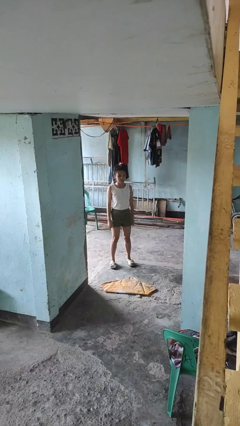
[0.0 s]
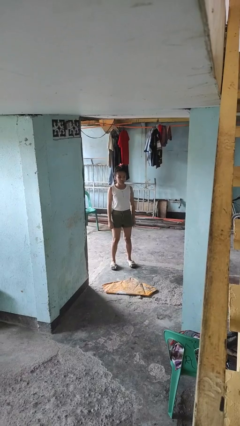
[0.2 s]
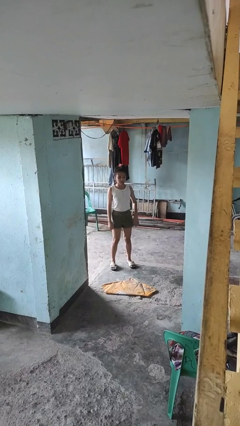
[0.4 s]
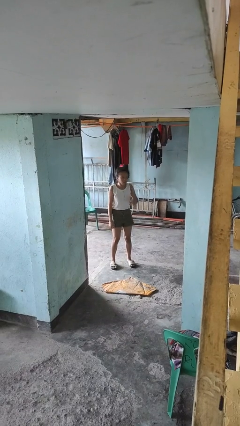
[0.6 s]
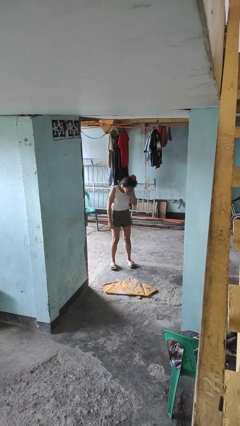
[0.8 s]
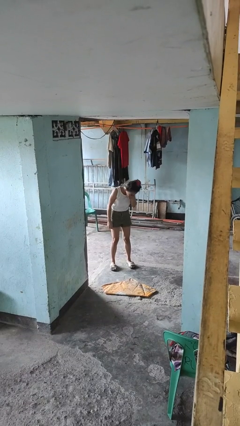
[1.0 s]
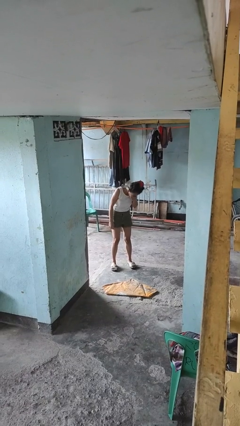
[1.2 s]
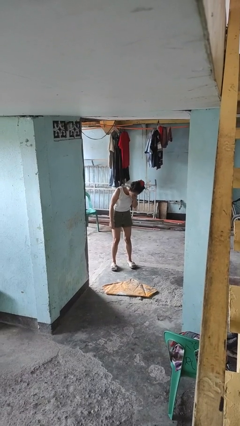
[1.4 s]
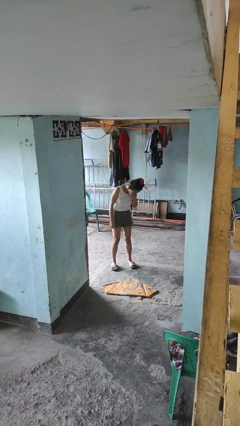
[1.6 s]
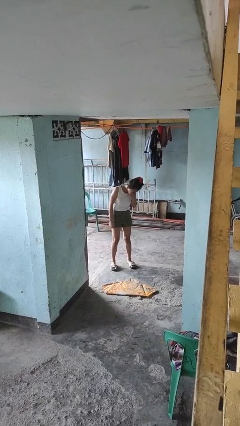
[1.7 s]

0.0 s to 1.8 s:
person sneezes into hand

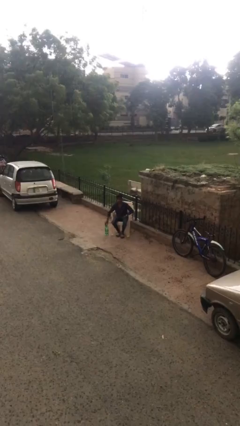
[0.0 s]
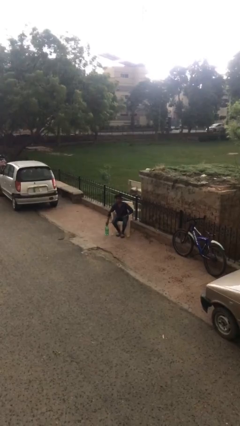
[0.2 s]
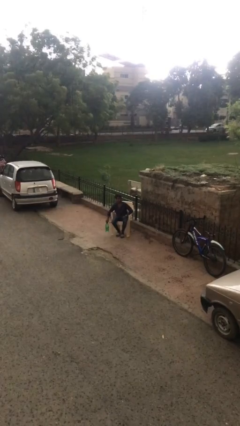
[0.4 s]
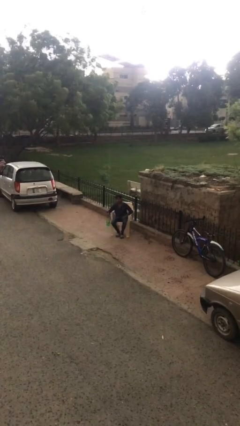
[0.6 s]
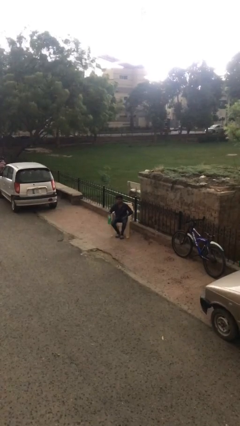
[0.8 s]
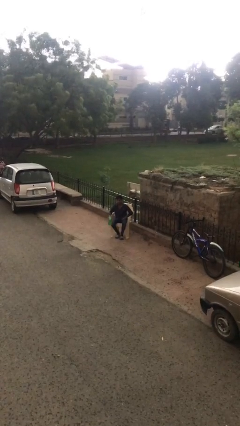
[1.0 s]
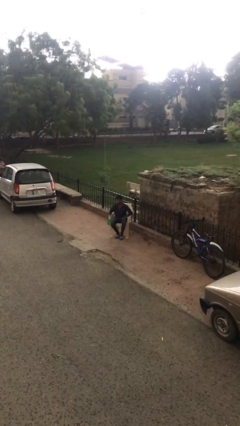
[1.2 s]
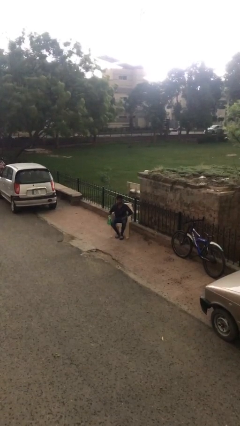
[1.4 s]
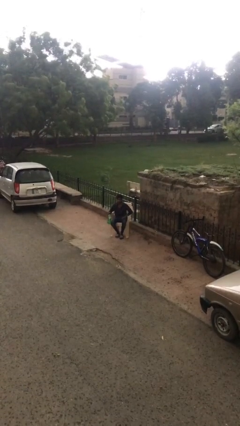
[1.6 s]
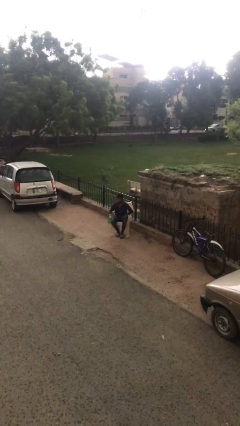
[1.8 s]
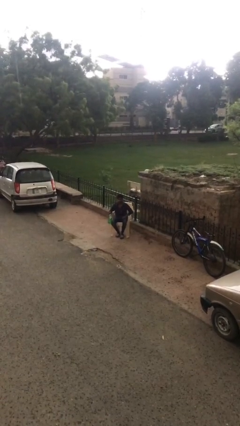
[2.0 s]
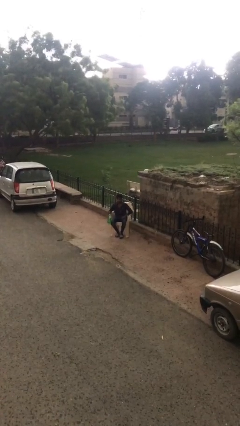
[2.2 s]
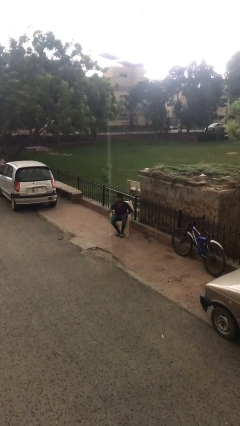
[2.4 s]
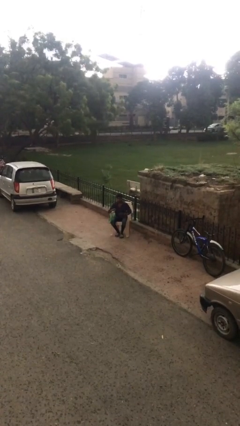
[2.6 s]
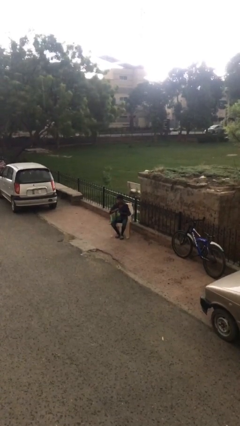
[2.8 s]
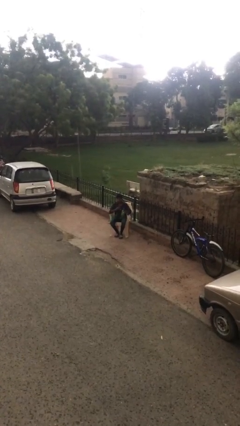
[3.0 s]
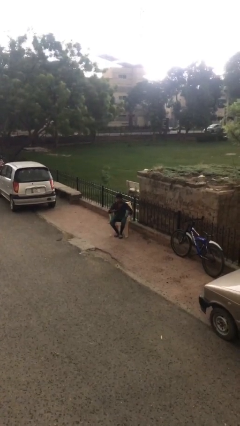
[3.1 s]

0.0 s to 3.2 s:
person picks up object from floor

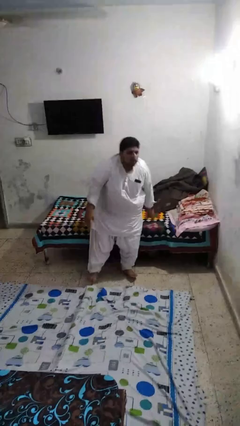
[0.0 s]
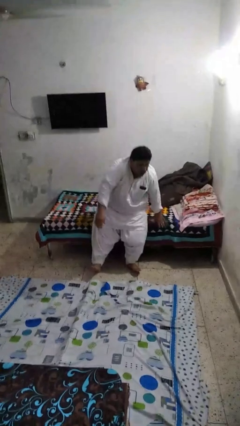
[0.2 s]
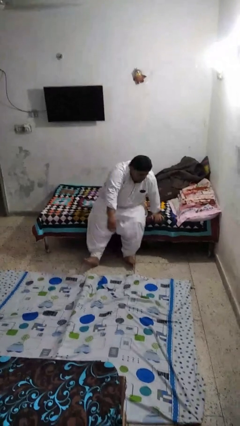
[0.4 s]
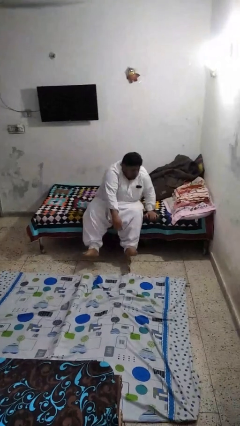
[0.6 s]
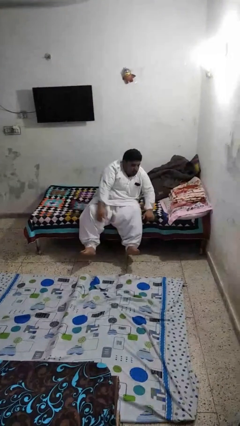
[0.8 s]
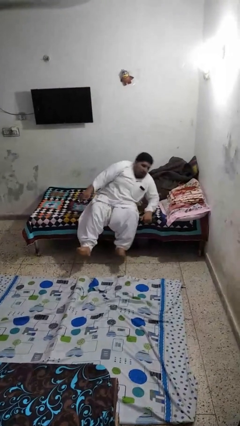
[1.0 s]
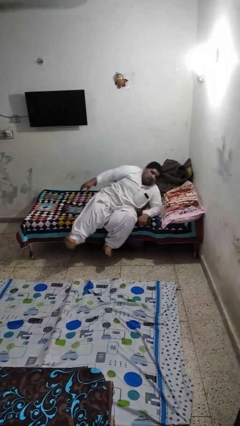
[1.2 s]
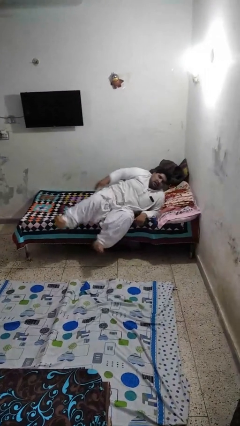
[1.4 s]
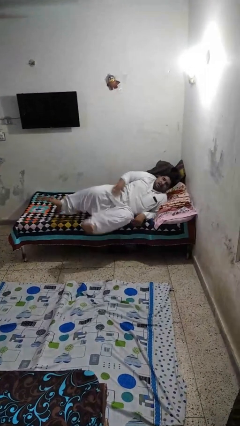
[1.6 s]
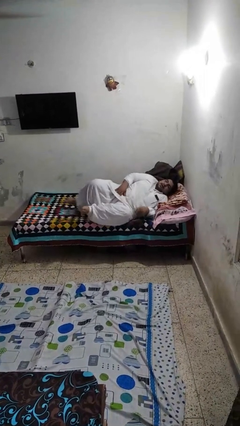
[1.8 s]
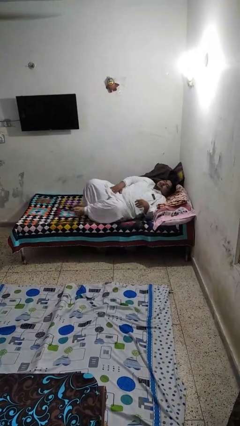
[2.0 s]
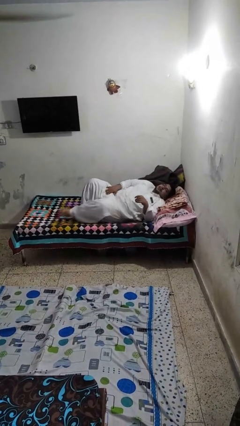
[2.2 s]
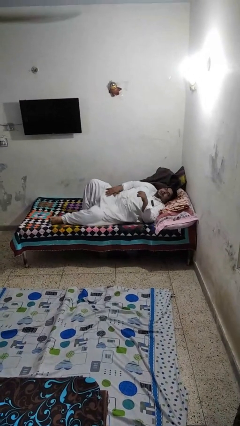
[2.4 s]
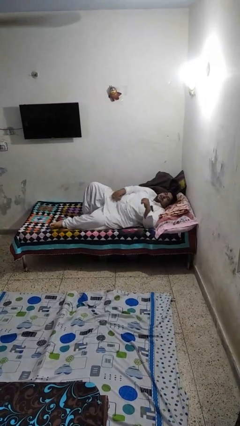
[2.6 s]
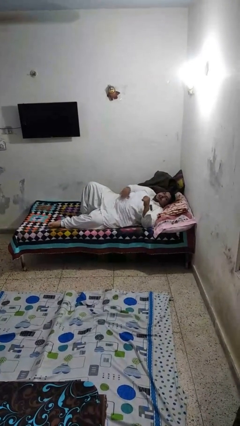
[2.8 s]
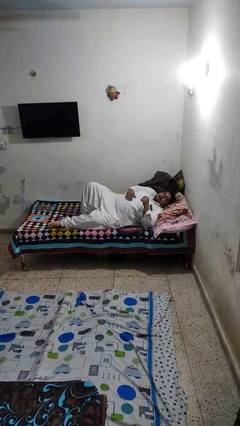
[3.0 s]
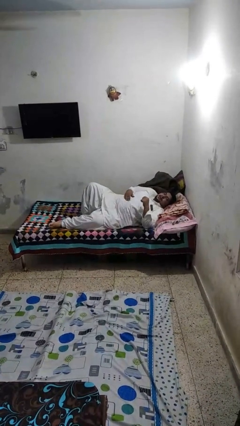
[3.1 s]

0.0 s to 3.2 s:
person lies down on bed

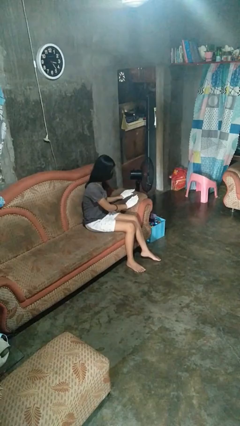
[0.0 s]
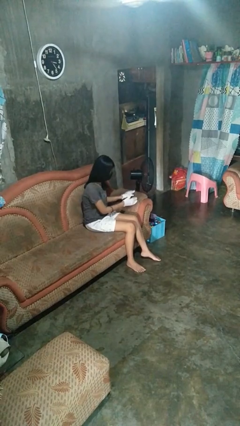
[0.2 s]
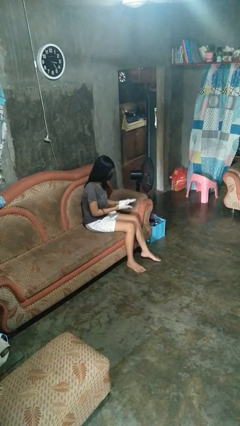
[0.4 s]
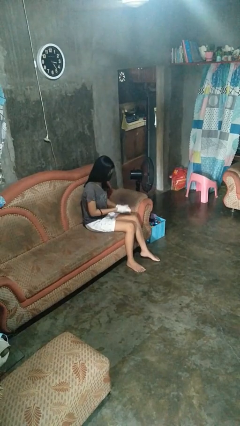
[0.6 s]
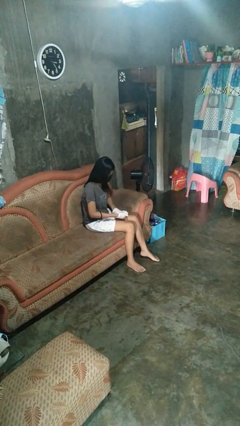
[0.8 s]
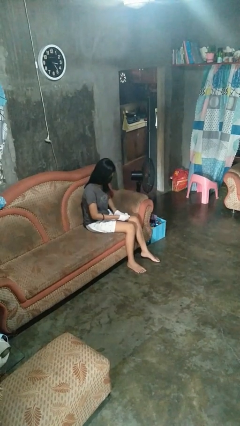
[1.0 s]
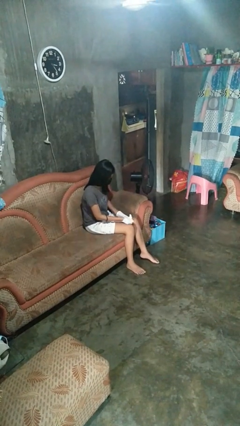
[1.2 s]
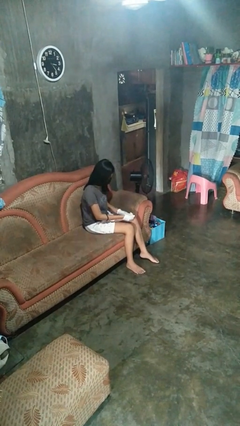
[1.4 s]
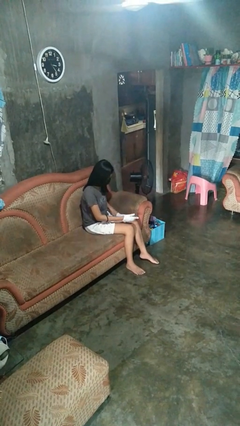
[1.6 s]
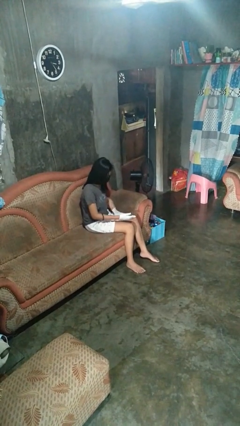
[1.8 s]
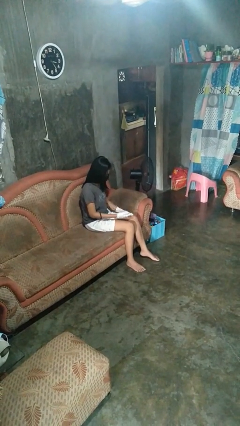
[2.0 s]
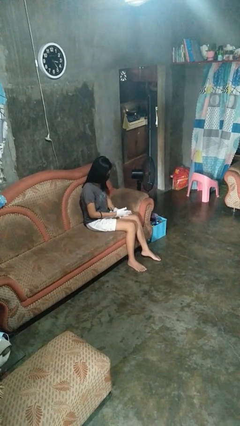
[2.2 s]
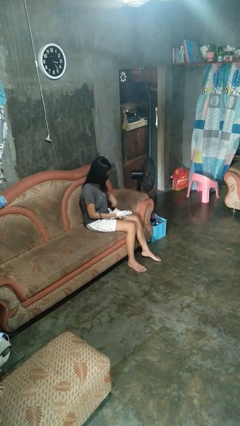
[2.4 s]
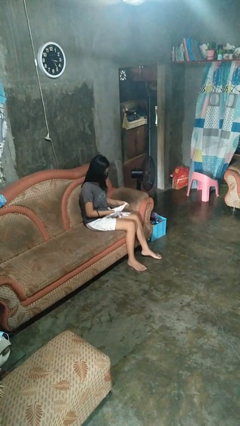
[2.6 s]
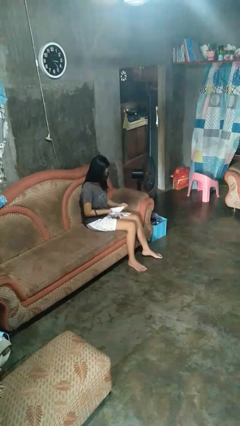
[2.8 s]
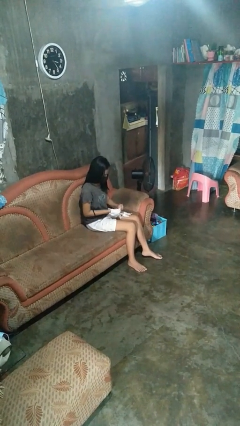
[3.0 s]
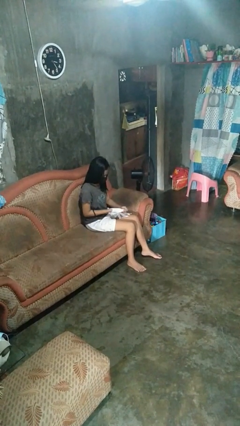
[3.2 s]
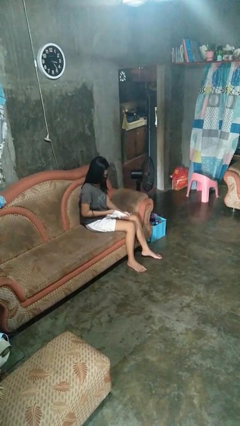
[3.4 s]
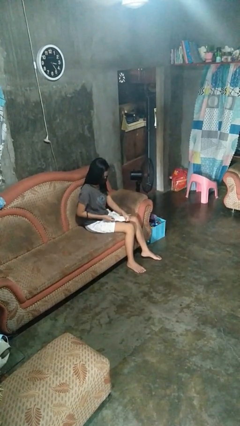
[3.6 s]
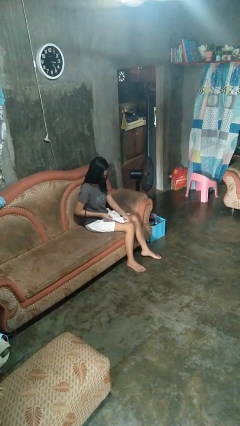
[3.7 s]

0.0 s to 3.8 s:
person takes off gloves

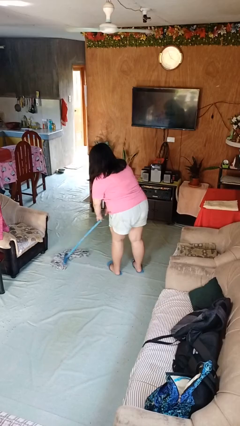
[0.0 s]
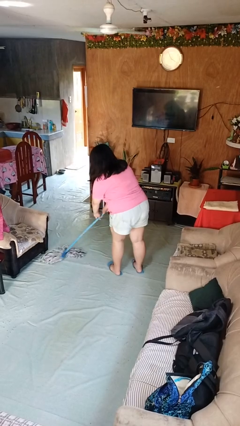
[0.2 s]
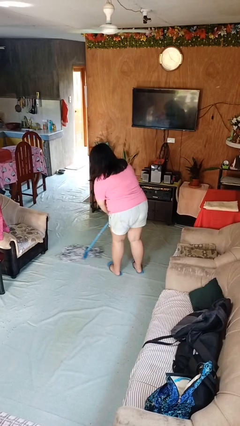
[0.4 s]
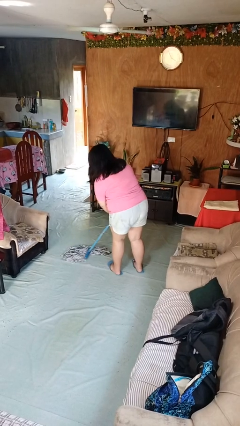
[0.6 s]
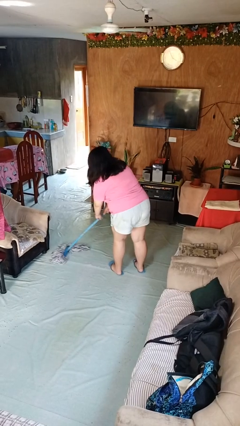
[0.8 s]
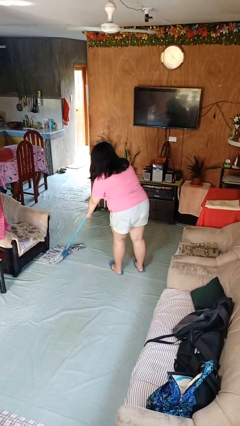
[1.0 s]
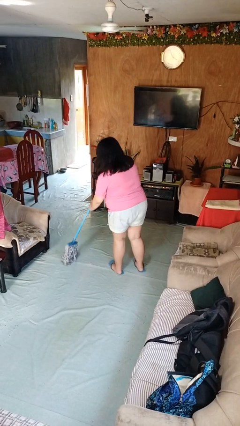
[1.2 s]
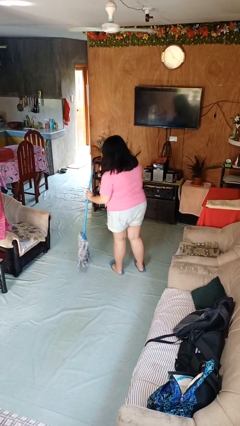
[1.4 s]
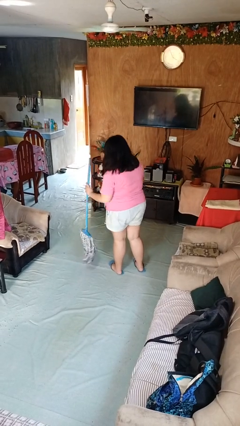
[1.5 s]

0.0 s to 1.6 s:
person mops

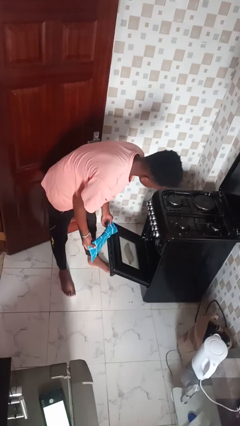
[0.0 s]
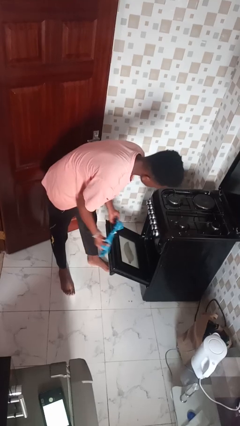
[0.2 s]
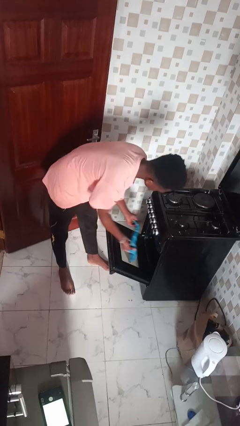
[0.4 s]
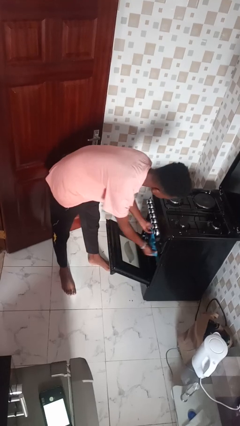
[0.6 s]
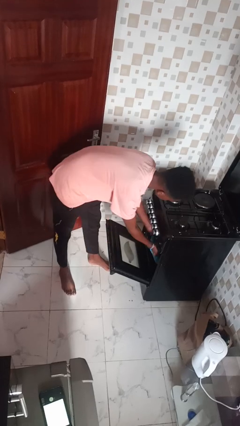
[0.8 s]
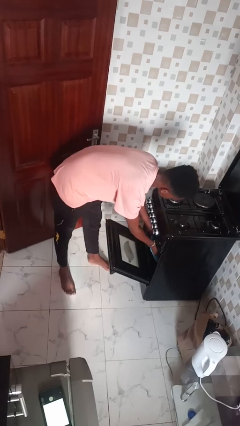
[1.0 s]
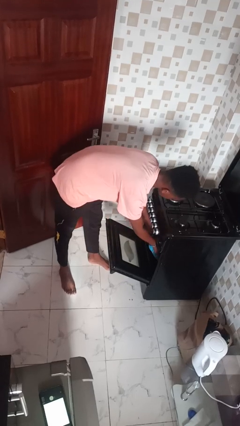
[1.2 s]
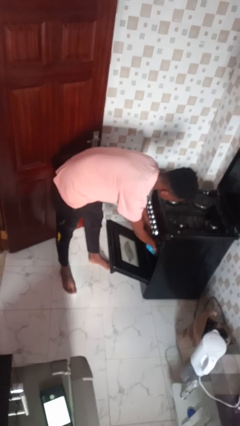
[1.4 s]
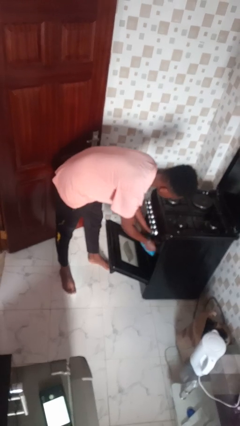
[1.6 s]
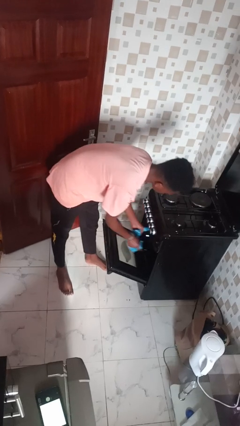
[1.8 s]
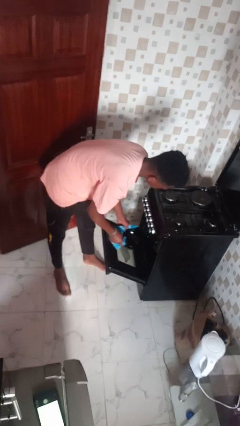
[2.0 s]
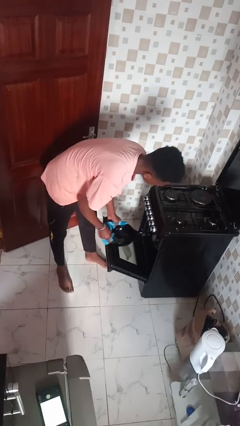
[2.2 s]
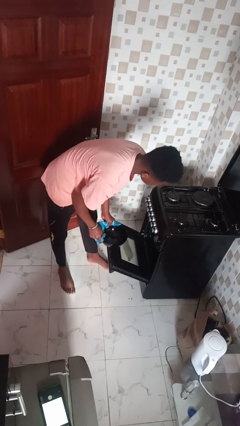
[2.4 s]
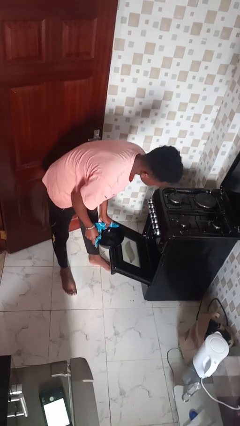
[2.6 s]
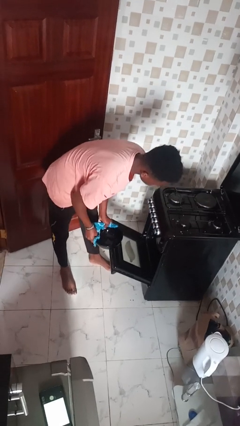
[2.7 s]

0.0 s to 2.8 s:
person takes object from oven

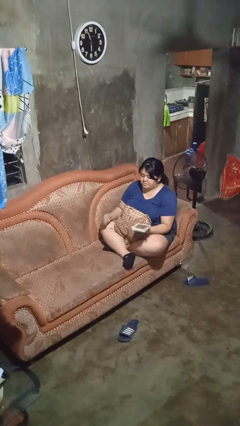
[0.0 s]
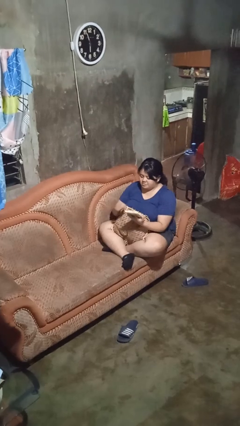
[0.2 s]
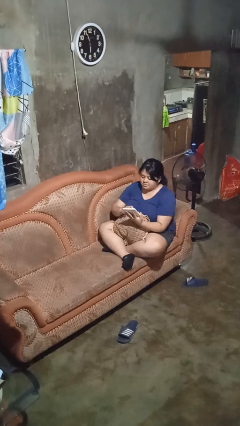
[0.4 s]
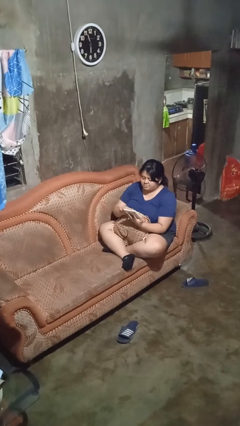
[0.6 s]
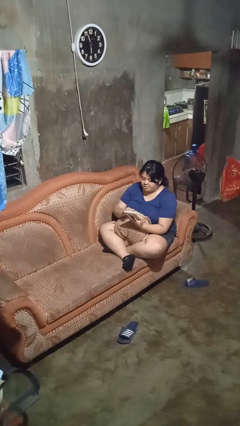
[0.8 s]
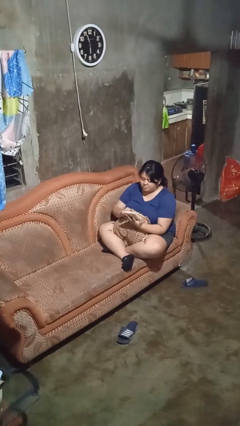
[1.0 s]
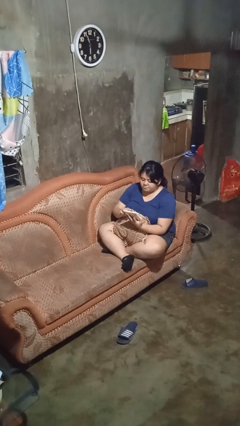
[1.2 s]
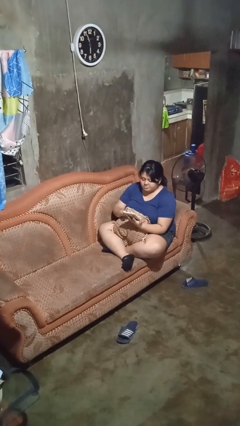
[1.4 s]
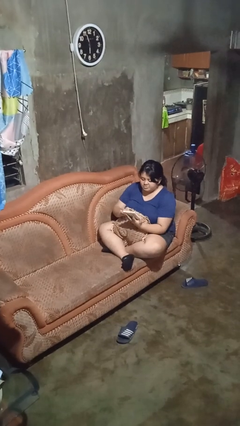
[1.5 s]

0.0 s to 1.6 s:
person interacts with tablet
